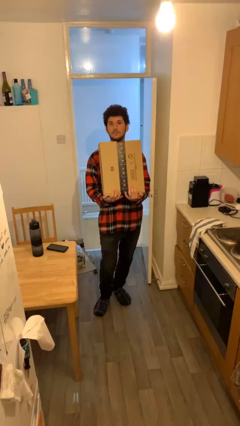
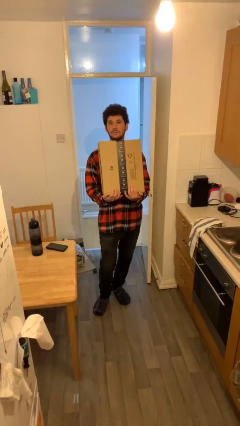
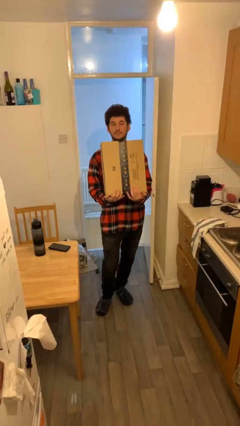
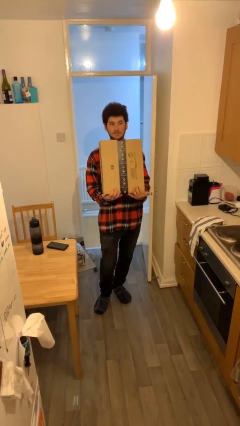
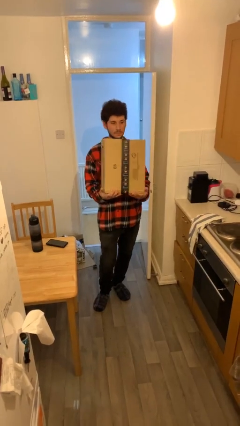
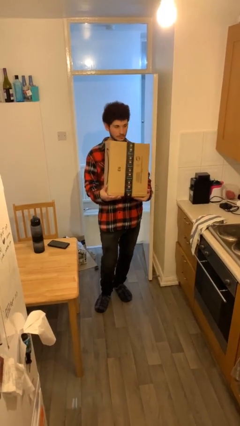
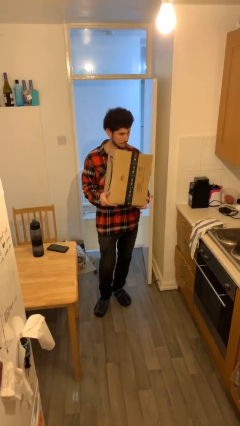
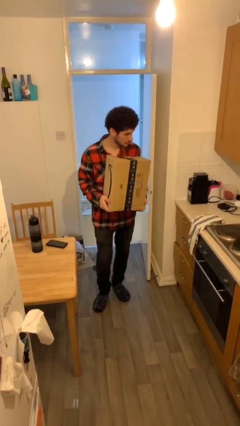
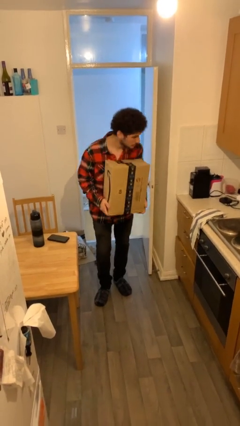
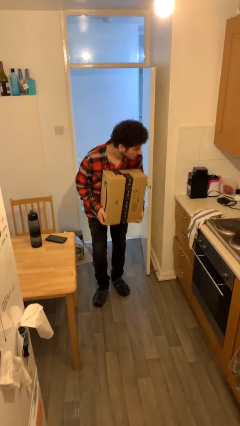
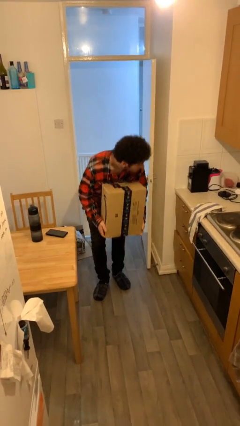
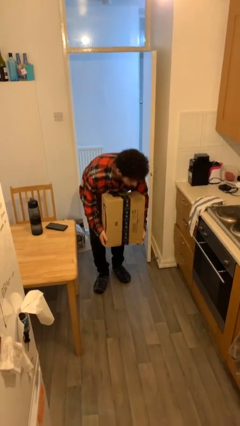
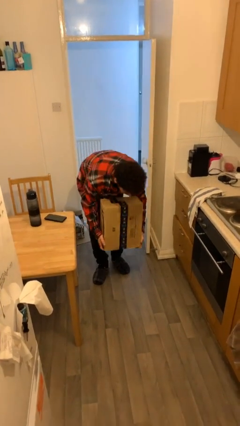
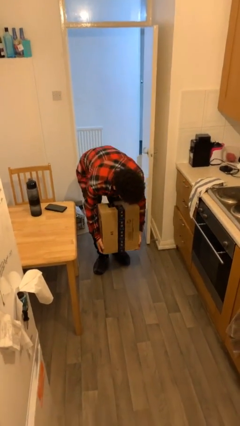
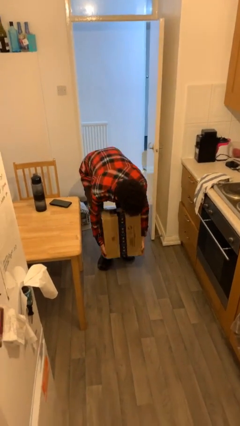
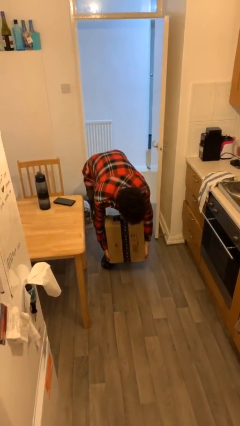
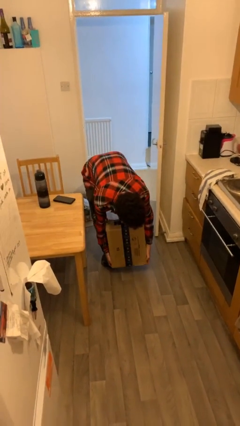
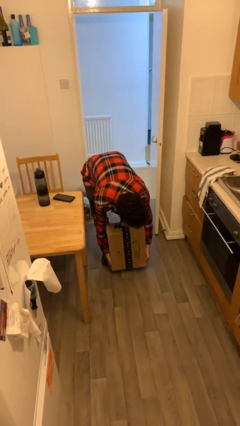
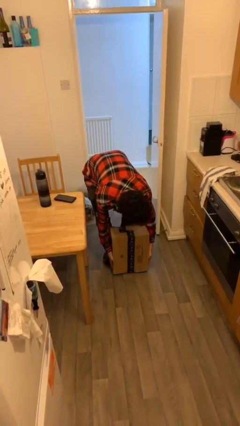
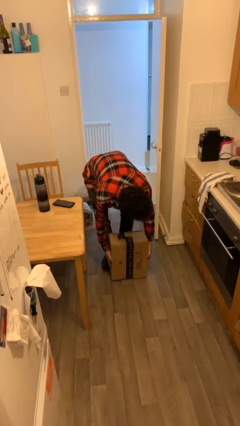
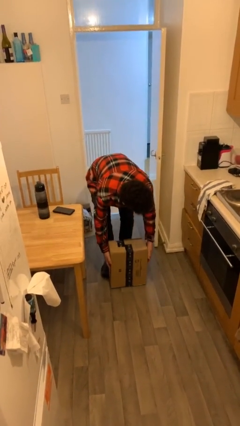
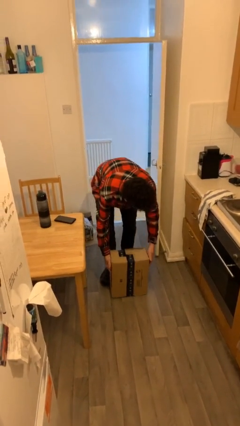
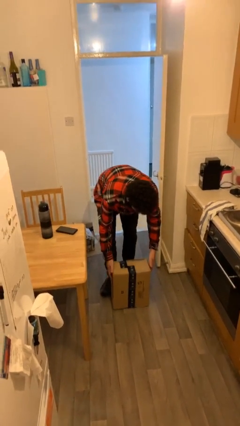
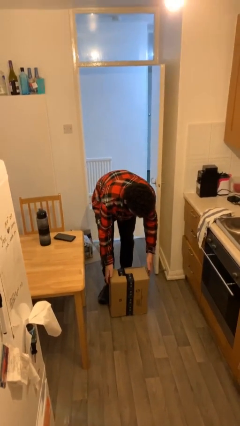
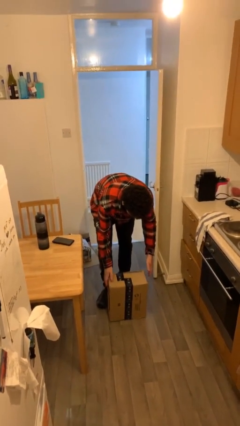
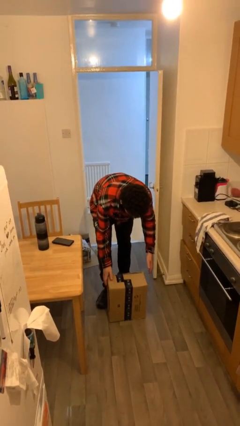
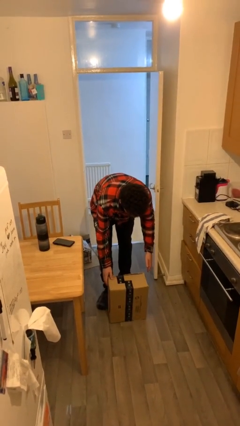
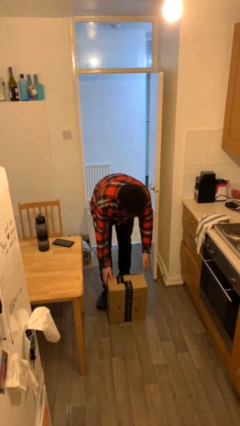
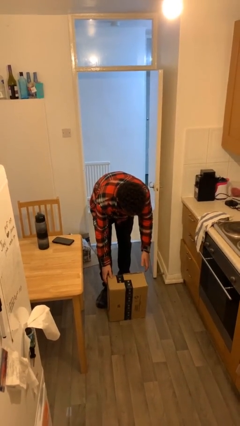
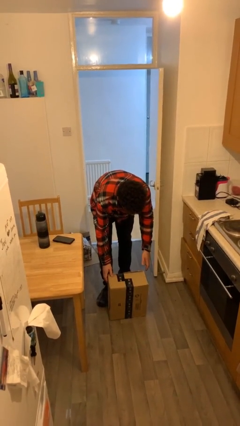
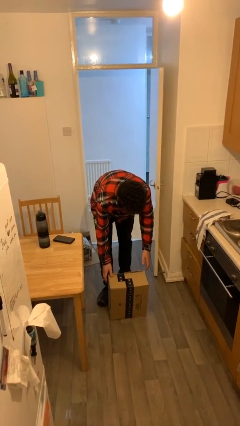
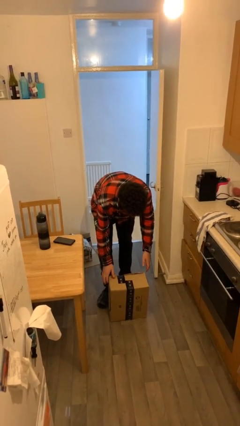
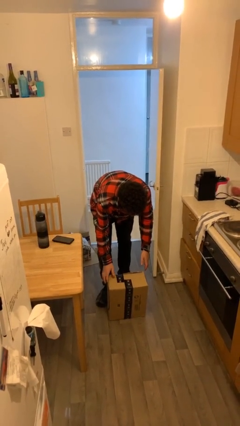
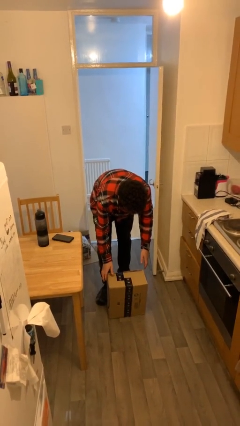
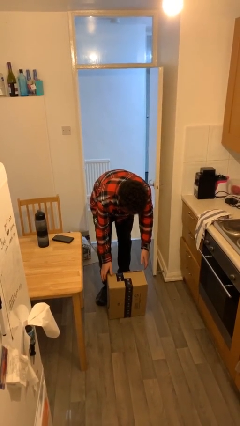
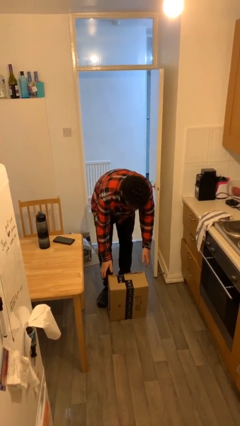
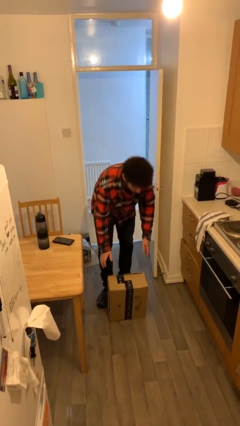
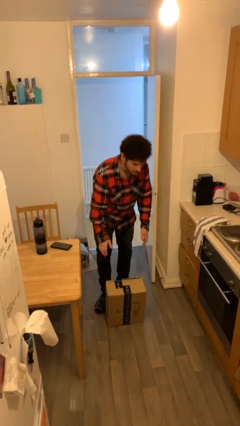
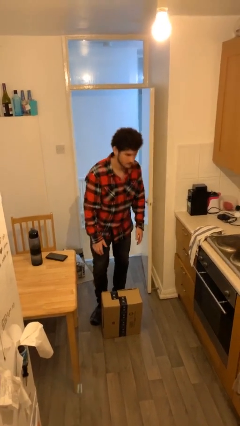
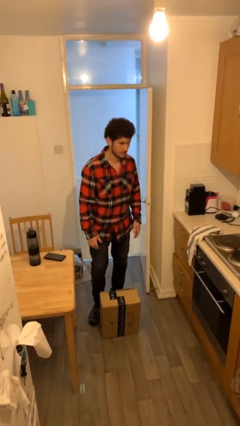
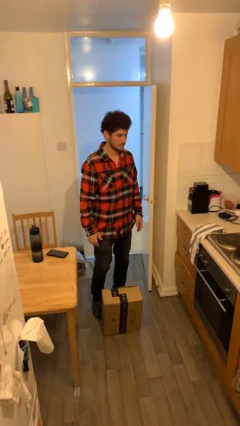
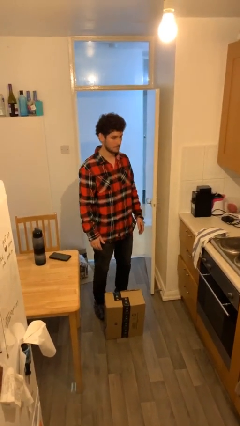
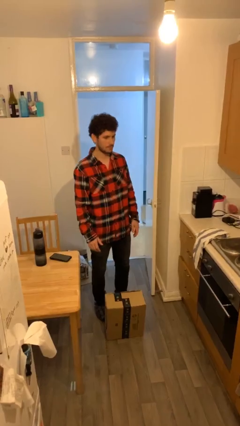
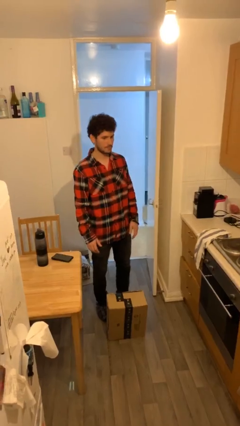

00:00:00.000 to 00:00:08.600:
person puts down object on floor

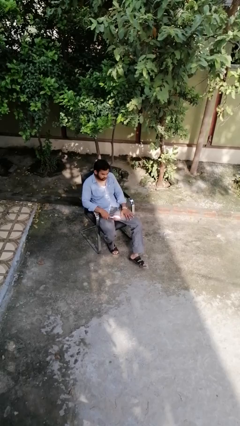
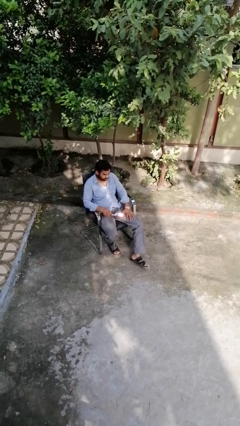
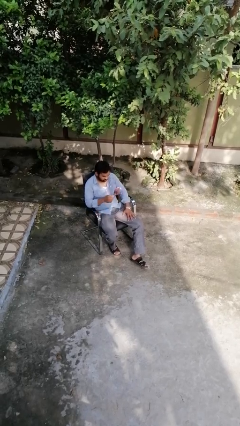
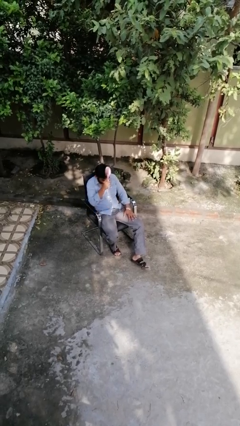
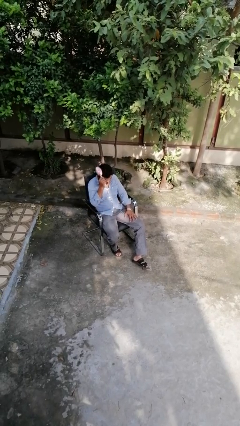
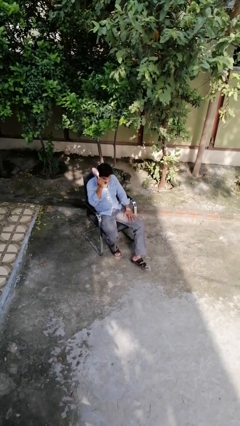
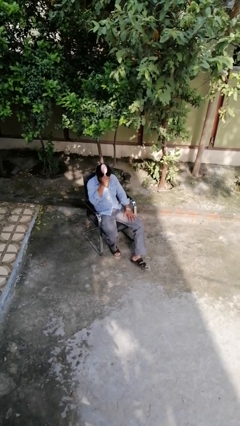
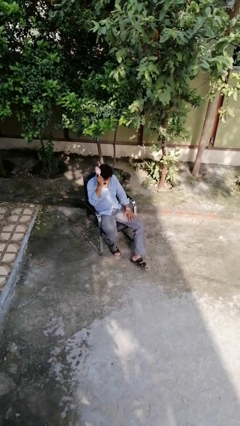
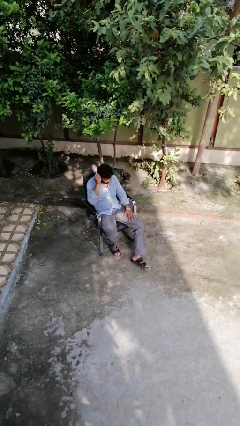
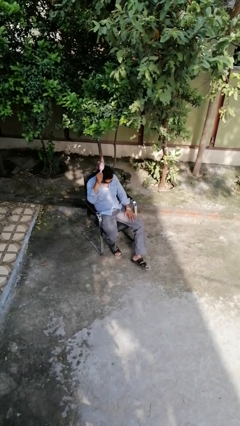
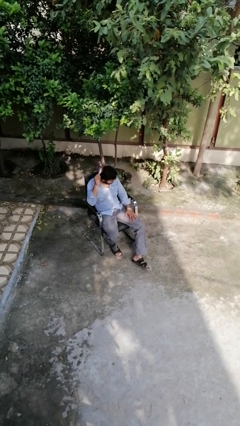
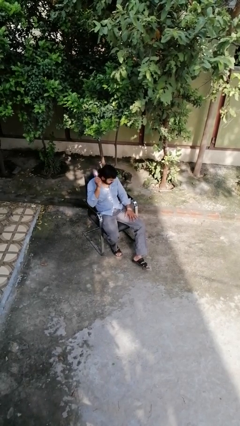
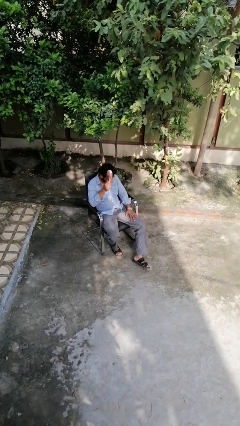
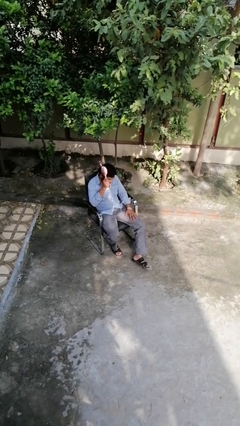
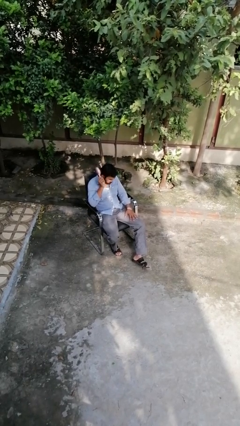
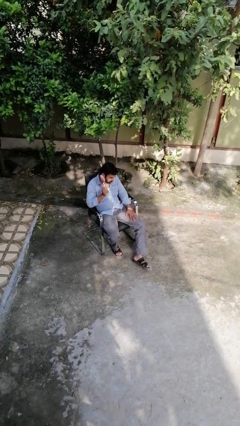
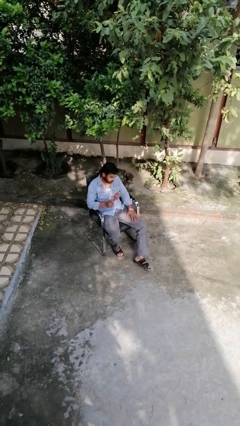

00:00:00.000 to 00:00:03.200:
person brushes hair

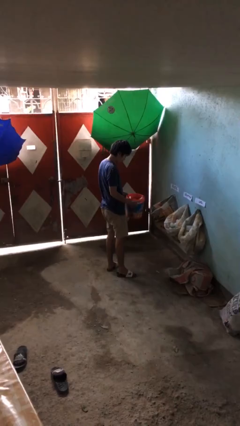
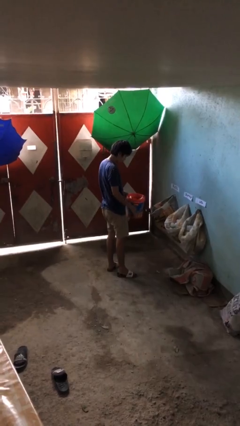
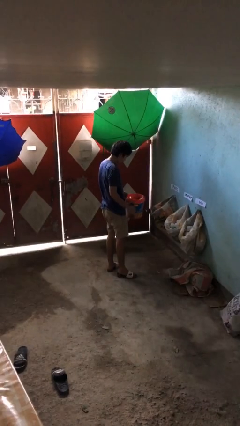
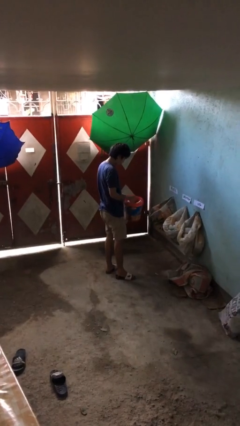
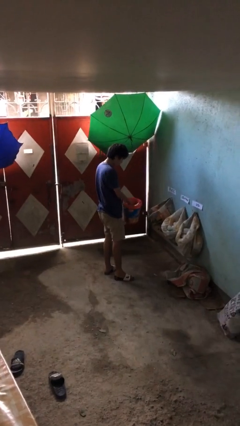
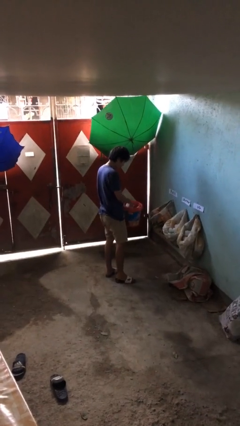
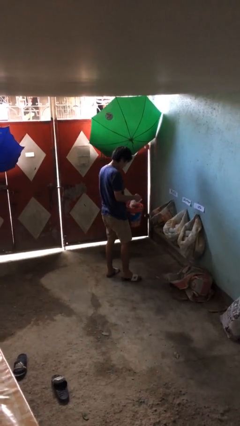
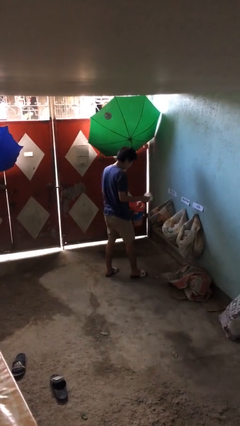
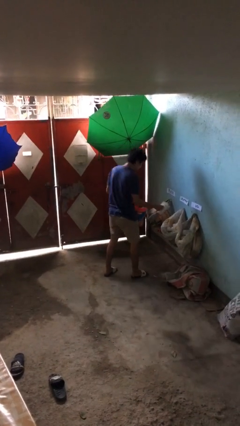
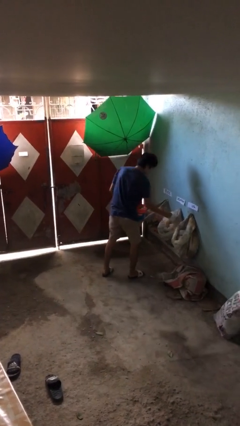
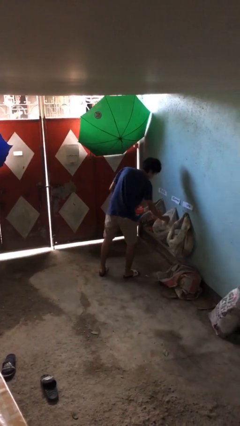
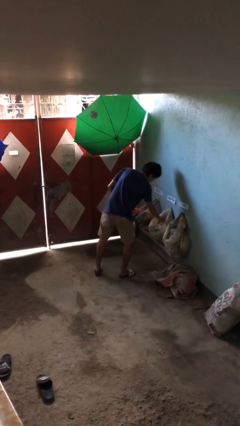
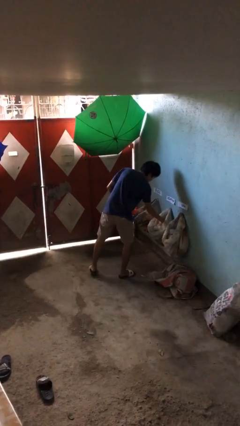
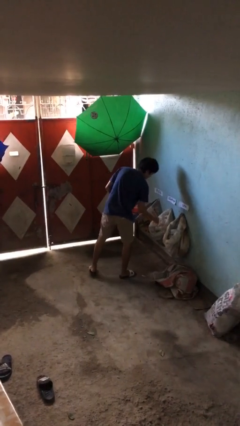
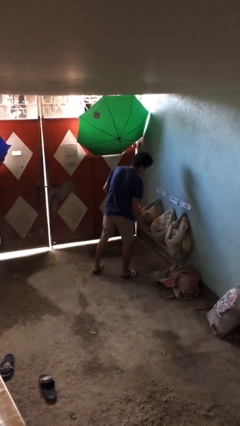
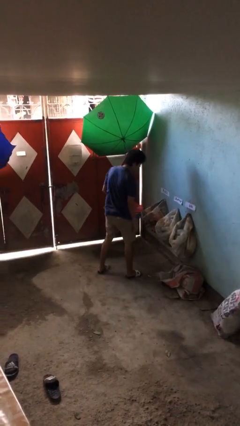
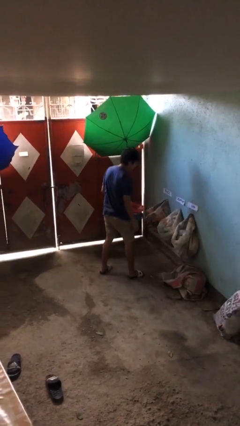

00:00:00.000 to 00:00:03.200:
person discards trash

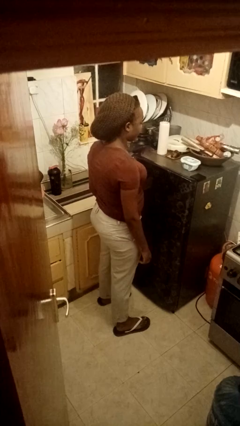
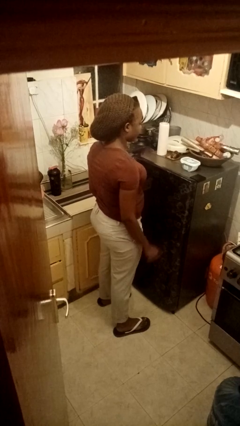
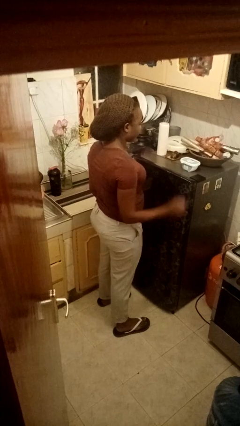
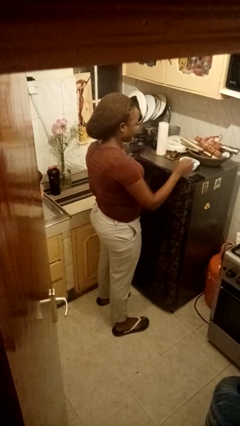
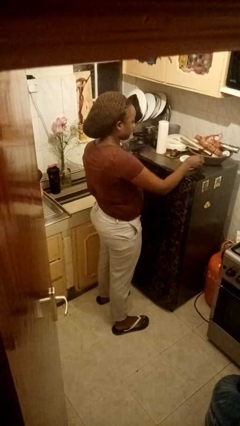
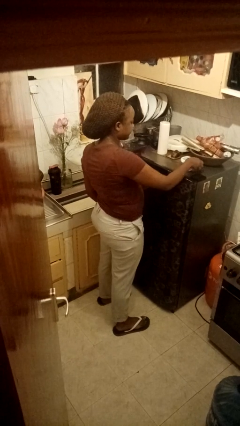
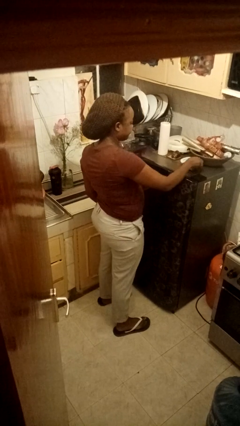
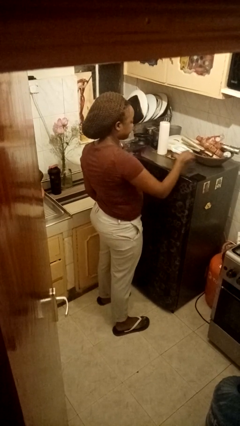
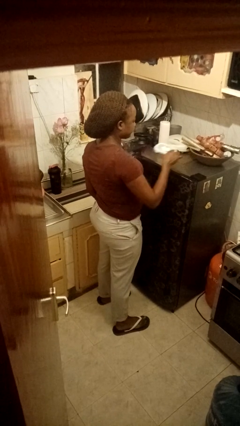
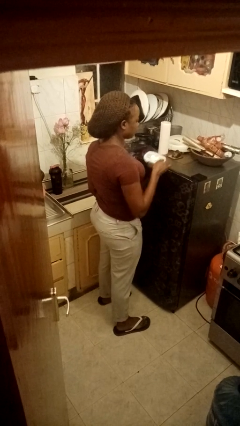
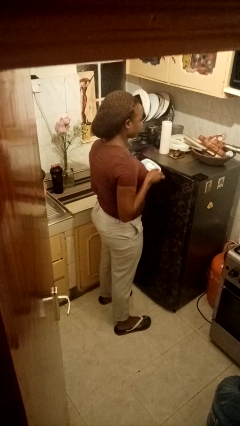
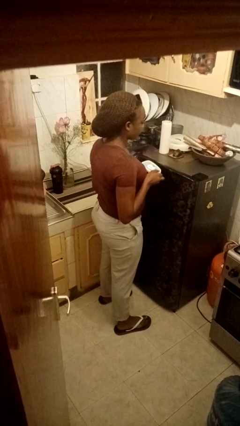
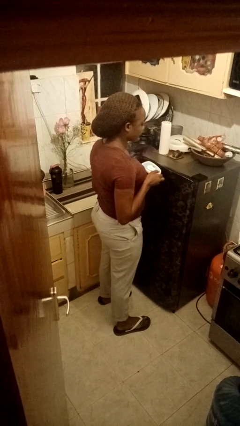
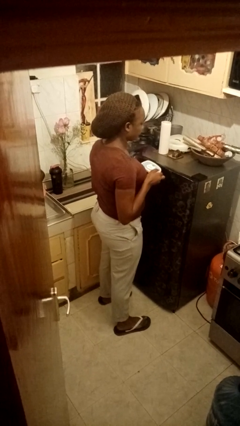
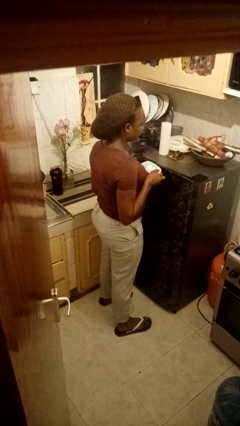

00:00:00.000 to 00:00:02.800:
person picks up object from countertop
